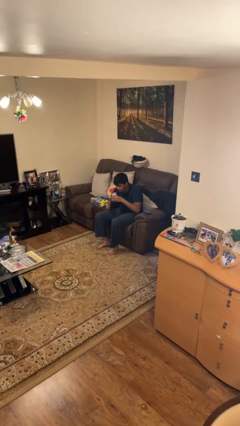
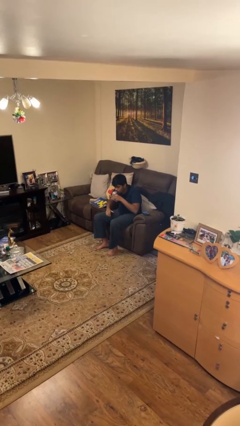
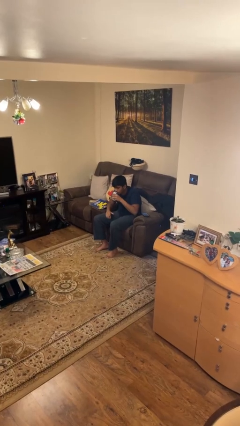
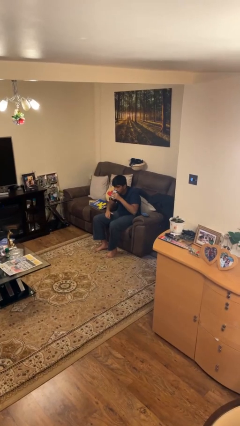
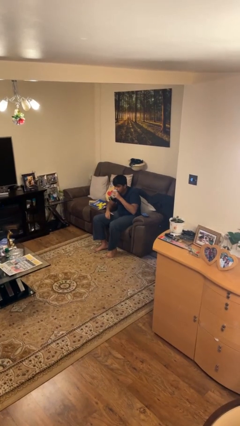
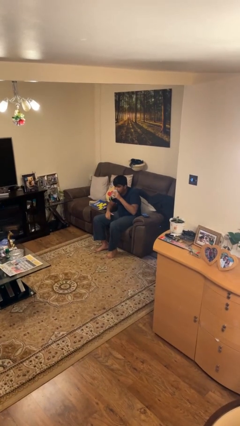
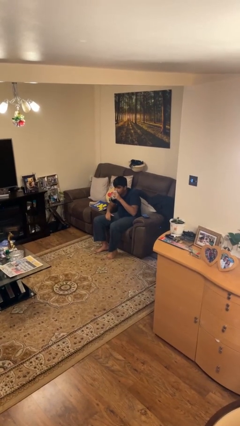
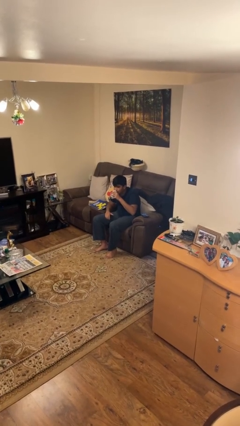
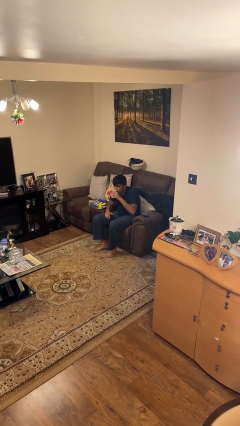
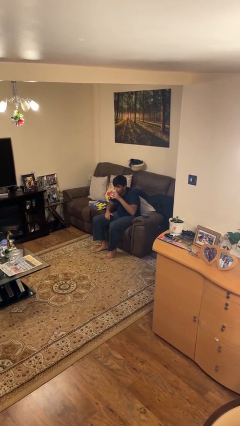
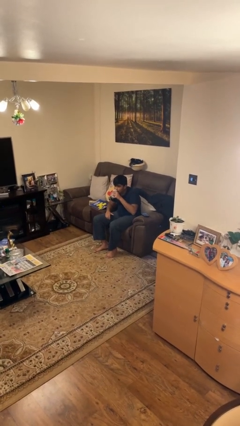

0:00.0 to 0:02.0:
person drinks from beverage can

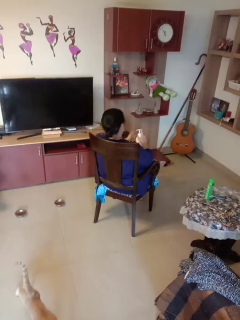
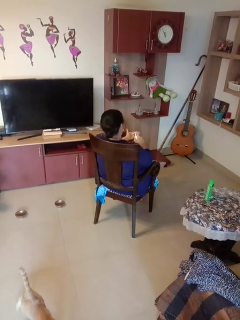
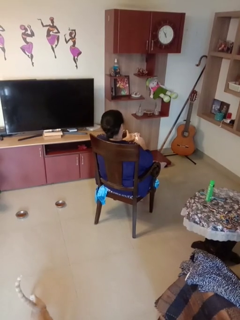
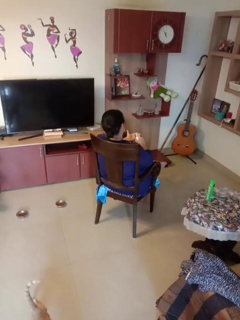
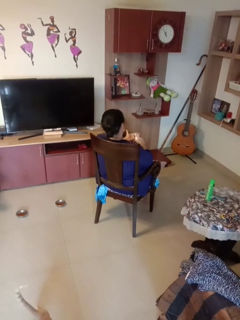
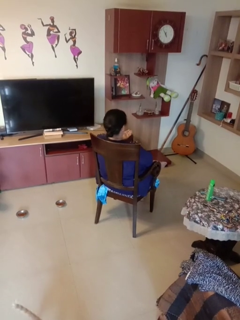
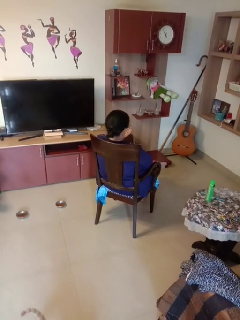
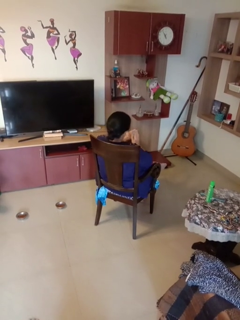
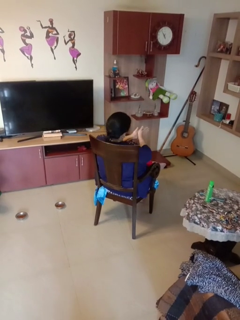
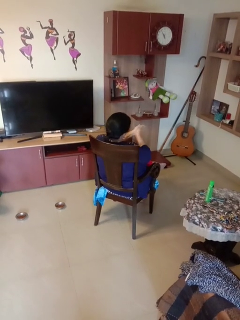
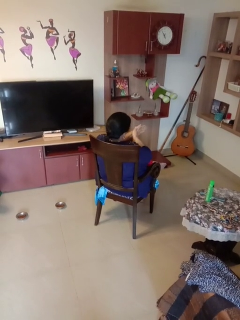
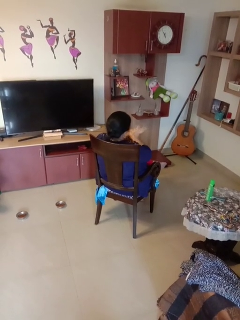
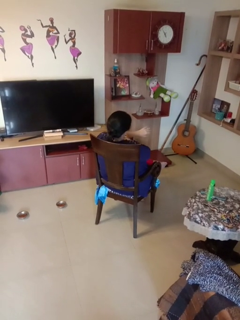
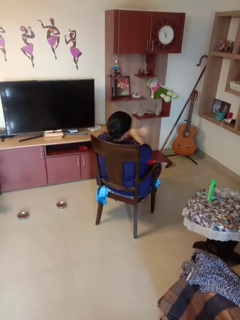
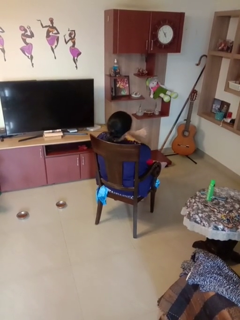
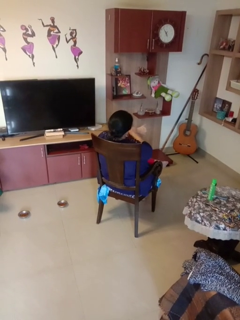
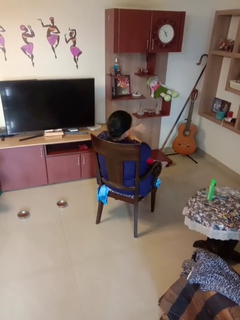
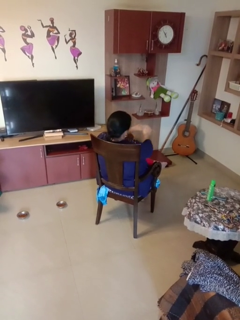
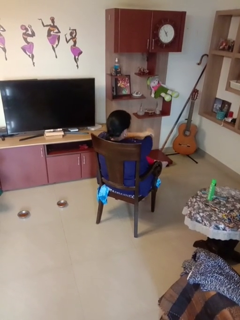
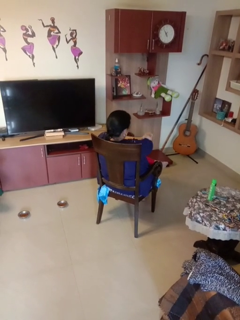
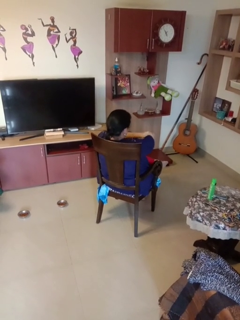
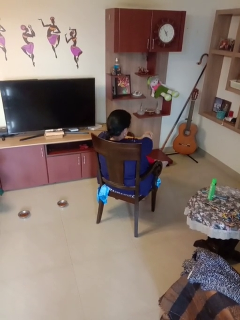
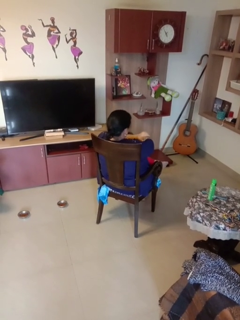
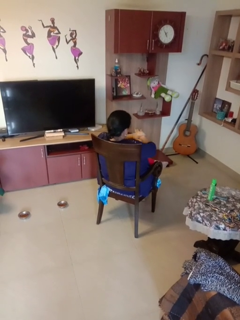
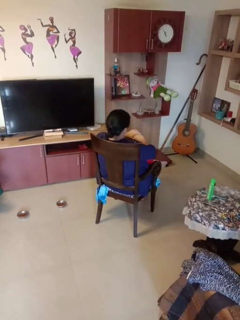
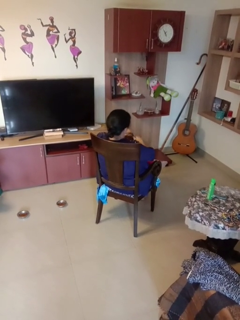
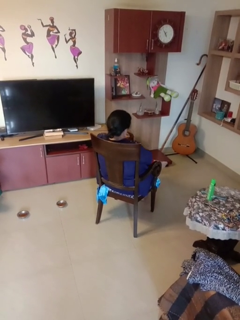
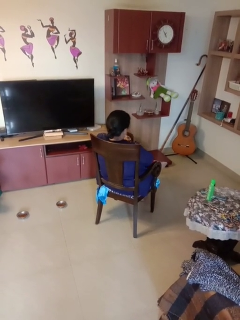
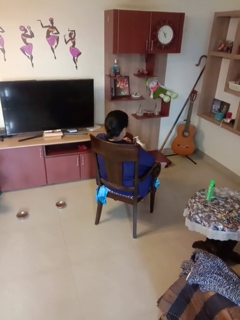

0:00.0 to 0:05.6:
person applies sunscreen

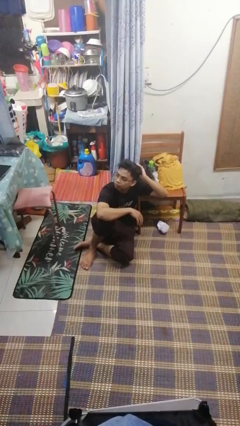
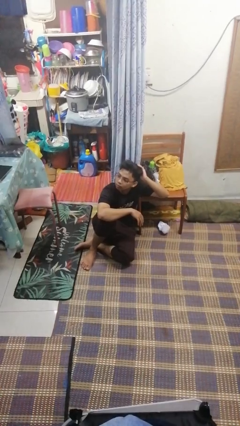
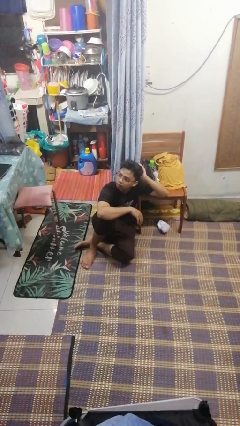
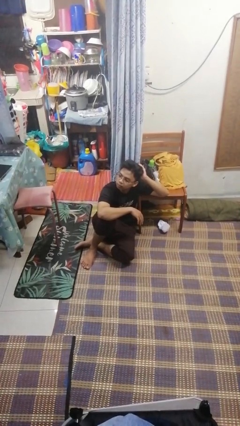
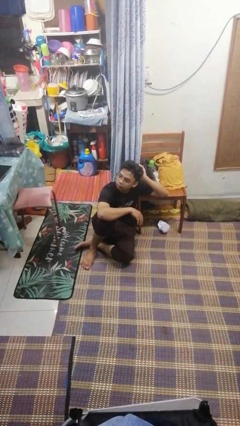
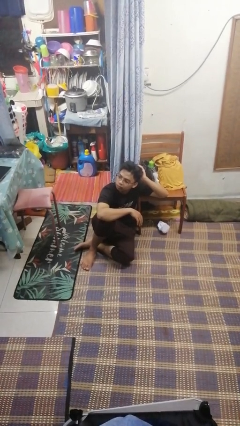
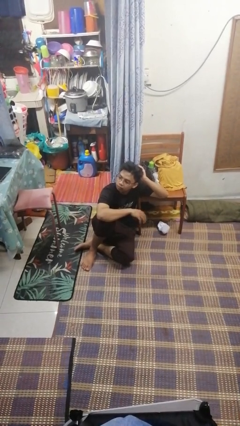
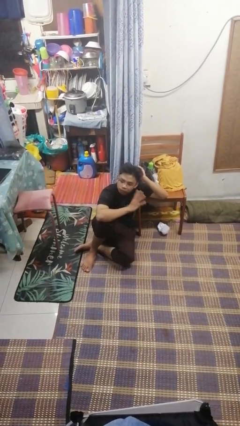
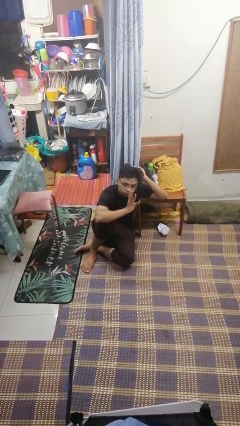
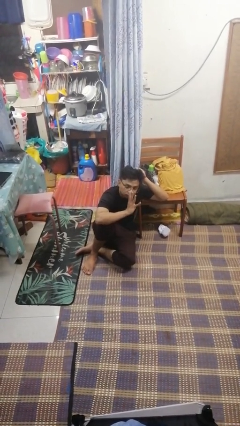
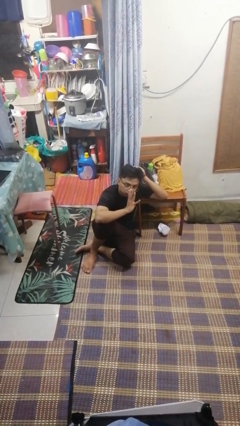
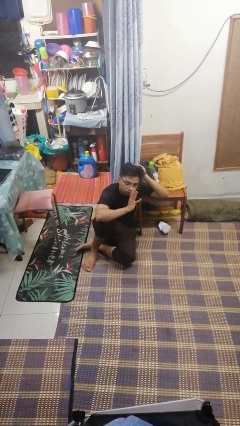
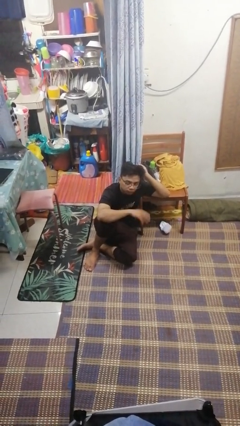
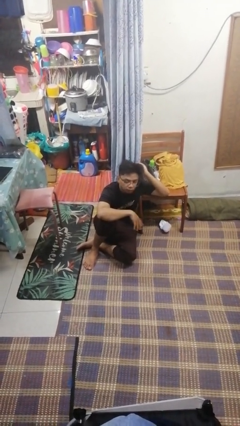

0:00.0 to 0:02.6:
person gestures number four

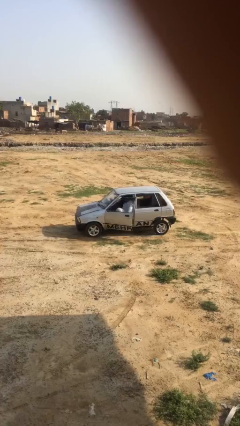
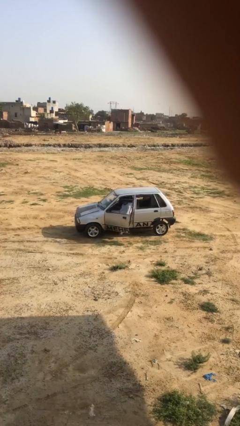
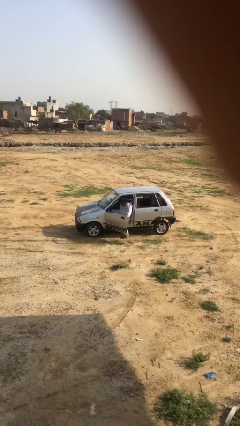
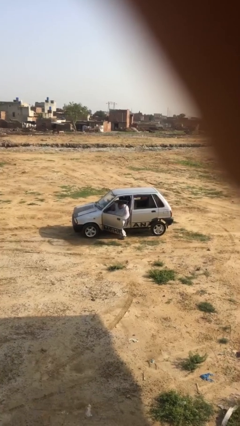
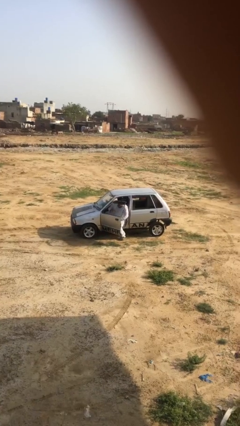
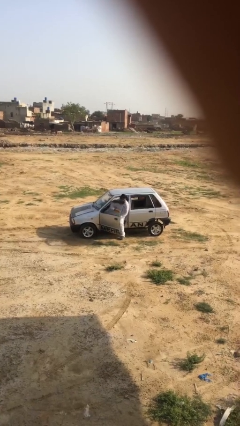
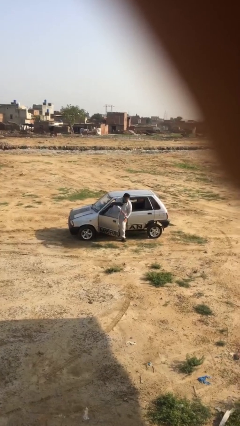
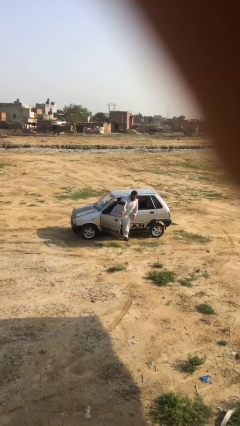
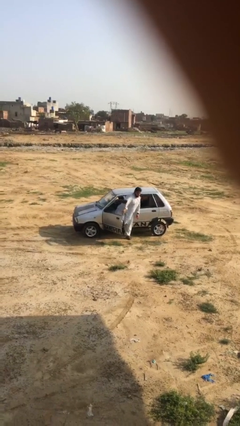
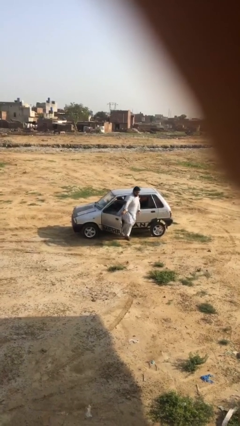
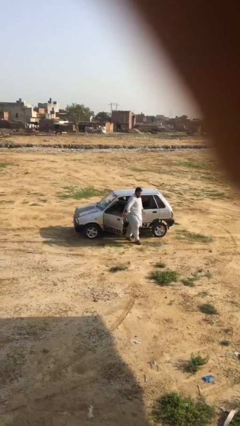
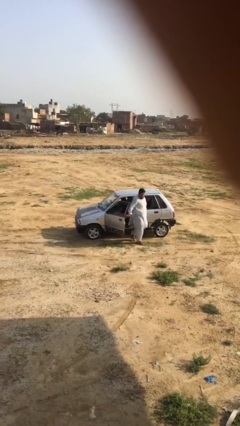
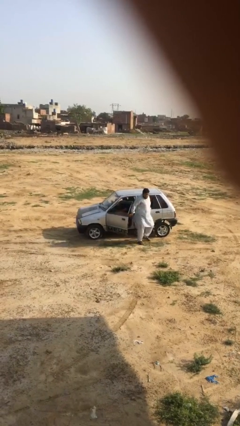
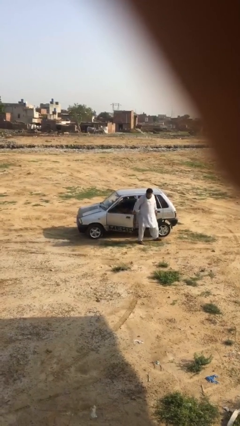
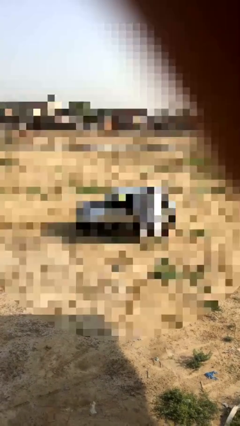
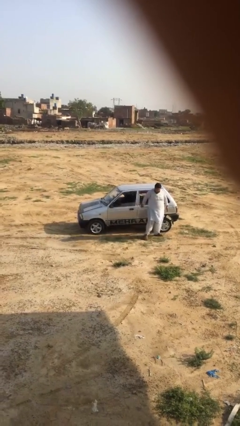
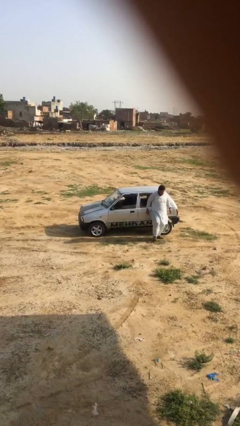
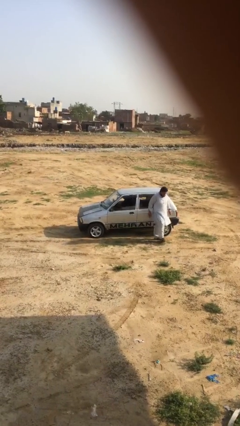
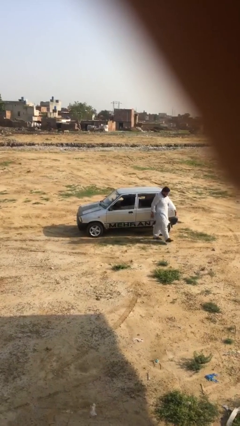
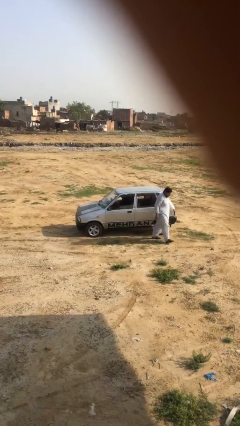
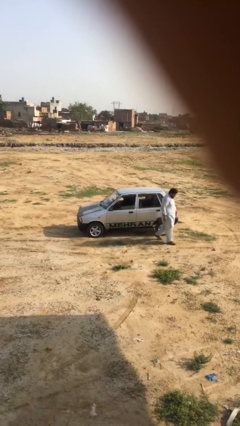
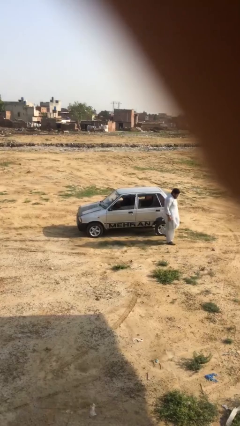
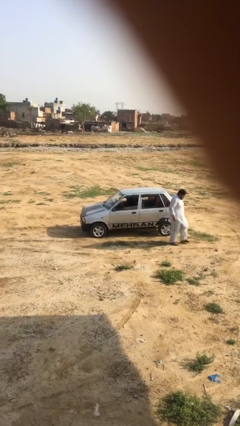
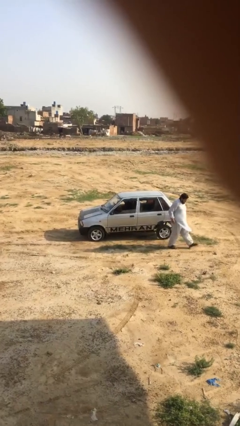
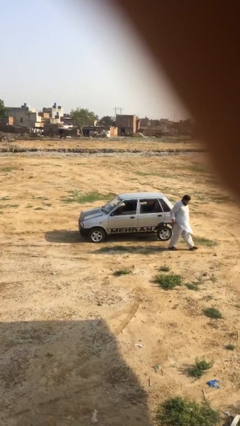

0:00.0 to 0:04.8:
car drops off person

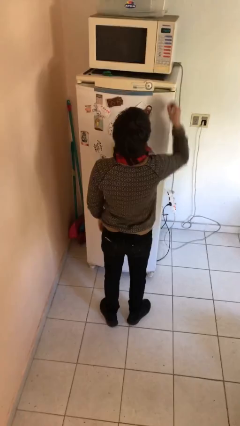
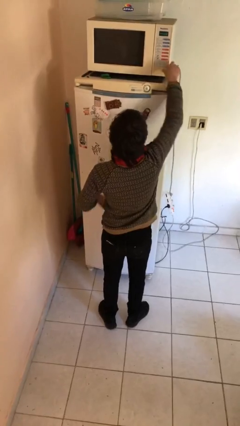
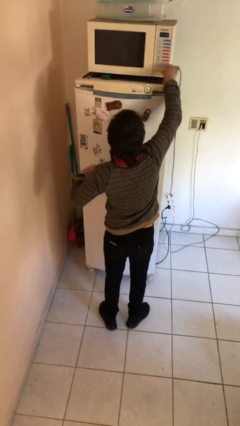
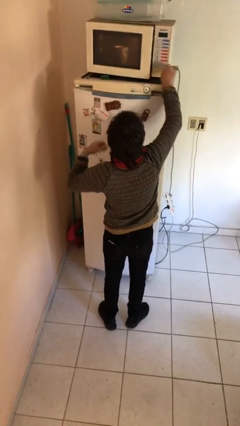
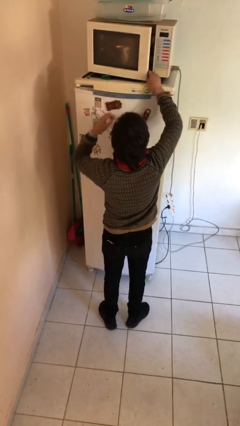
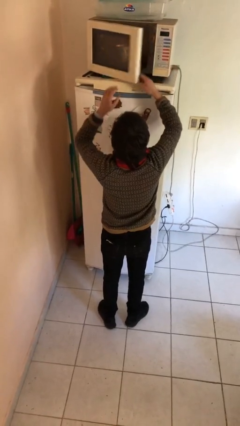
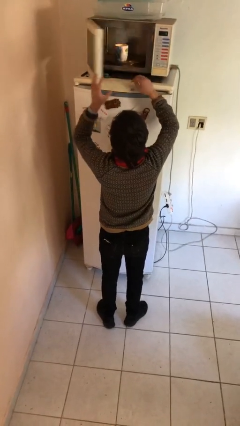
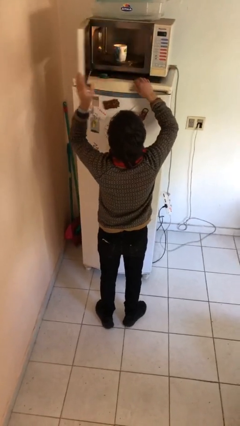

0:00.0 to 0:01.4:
person opens microwave

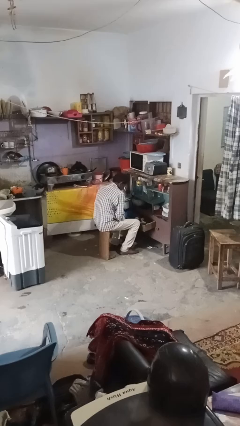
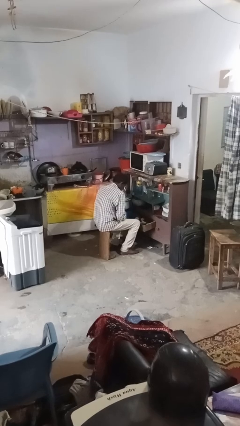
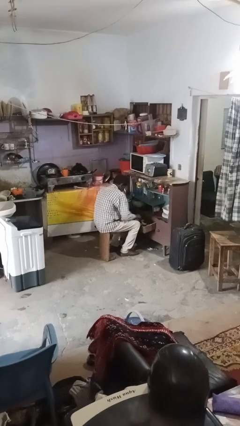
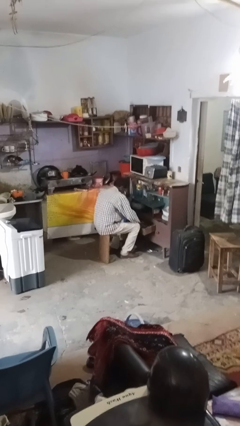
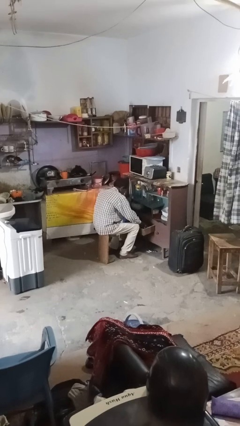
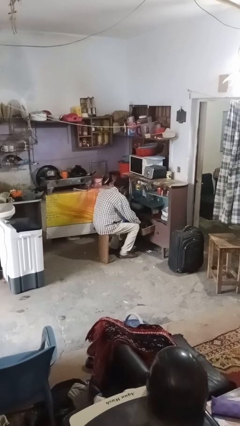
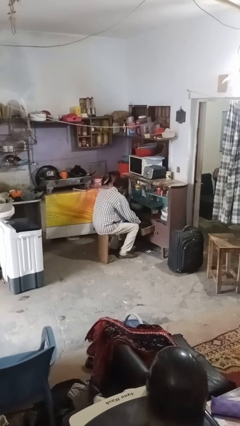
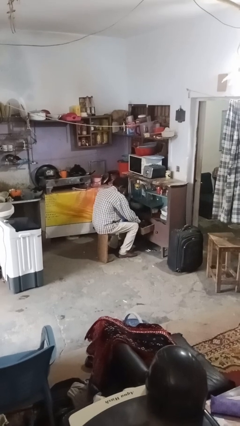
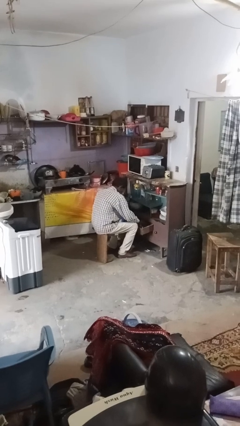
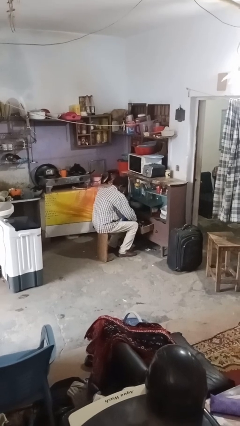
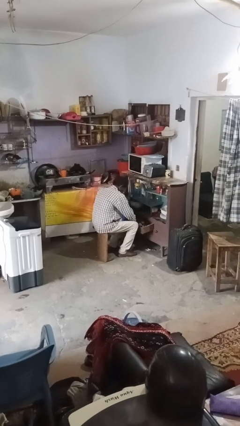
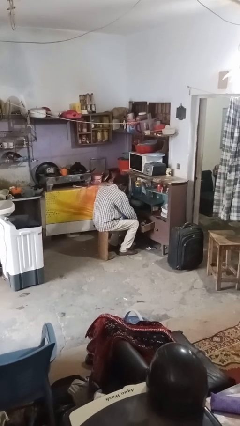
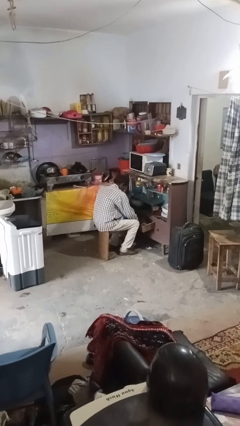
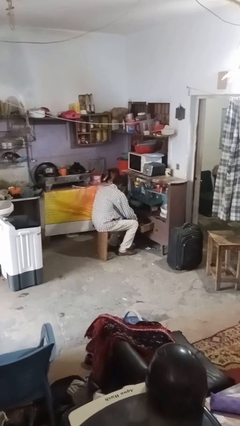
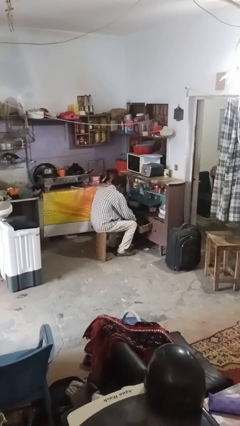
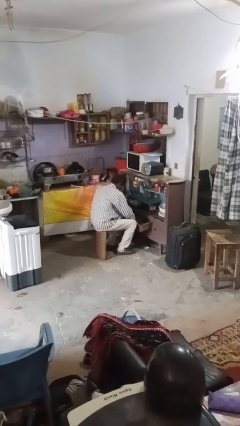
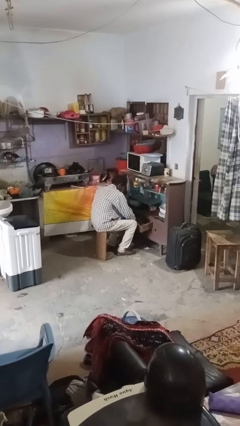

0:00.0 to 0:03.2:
person searches in kitchen drawer
